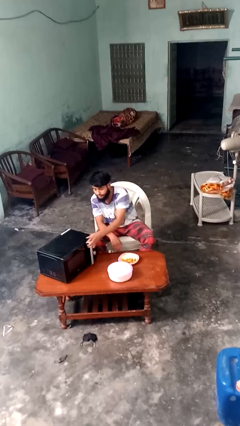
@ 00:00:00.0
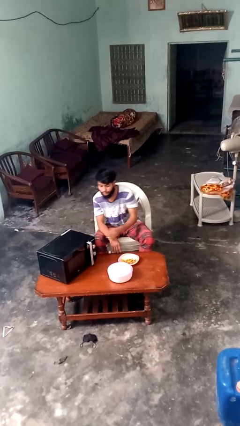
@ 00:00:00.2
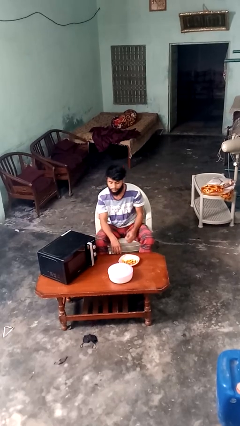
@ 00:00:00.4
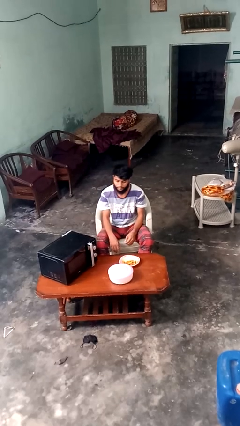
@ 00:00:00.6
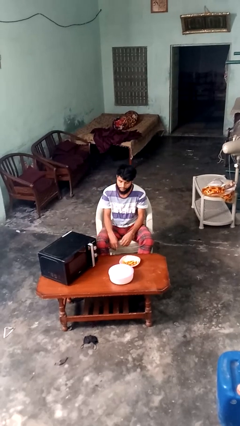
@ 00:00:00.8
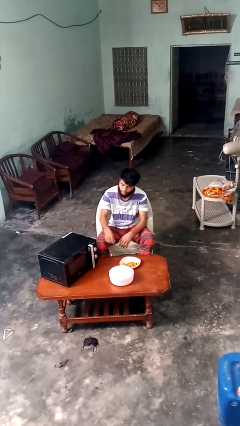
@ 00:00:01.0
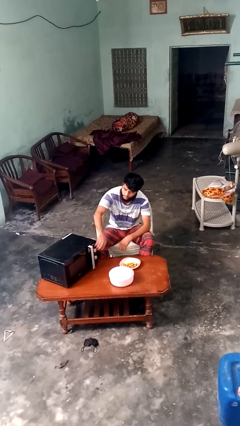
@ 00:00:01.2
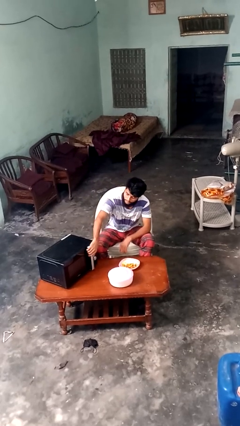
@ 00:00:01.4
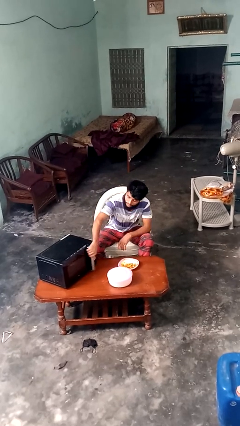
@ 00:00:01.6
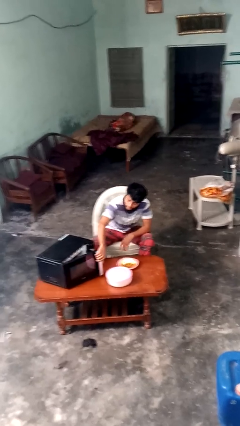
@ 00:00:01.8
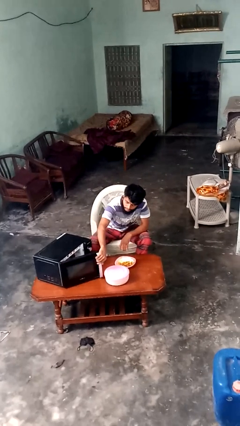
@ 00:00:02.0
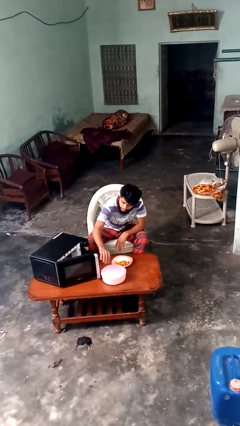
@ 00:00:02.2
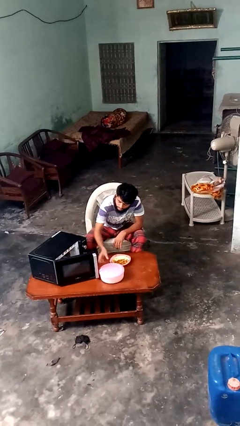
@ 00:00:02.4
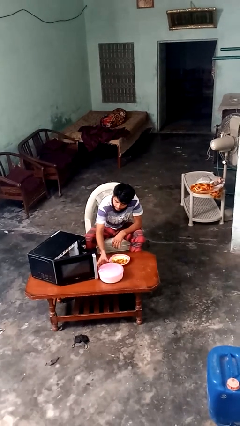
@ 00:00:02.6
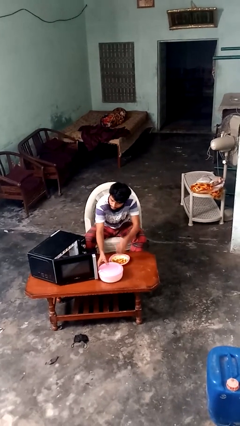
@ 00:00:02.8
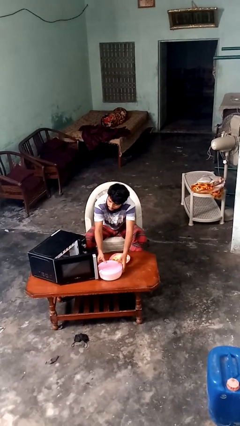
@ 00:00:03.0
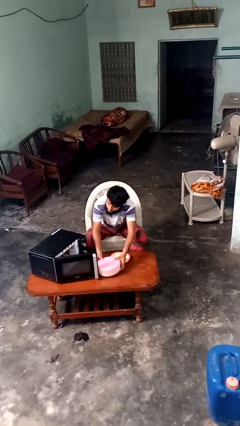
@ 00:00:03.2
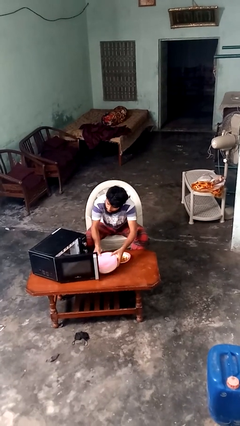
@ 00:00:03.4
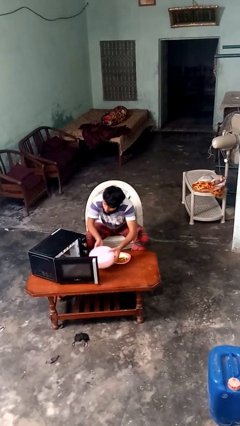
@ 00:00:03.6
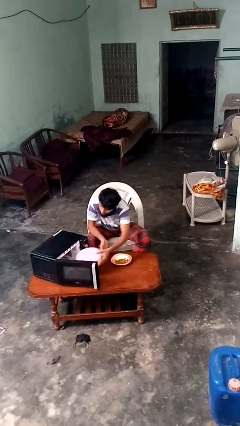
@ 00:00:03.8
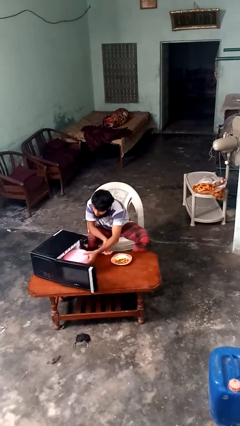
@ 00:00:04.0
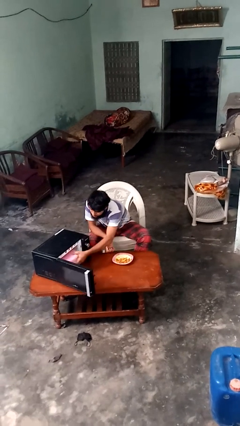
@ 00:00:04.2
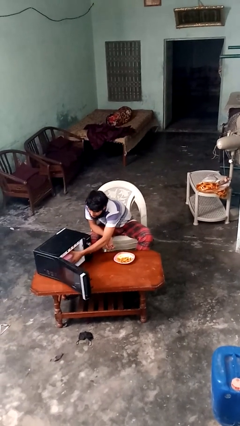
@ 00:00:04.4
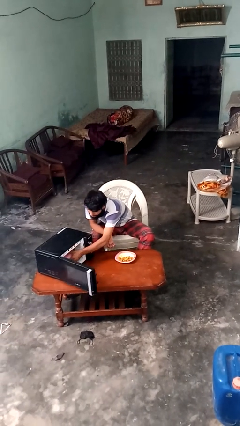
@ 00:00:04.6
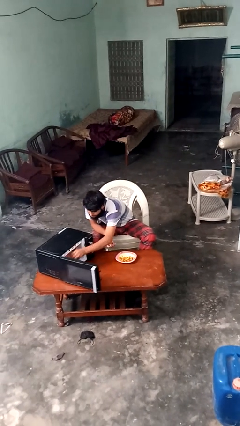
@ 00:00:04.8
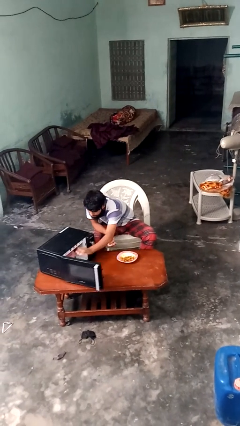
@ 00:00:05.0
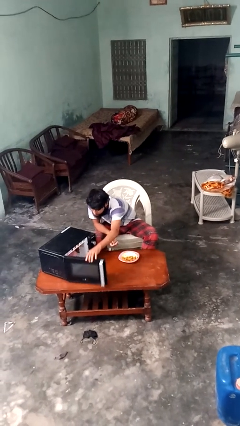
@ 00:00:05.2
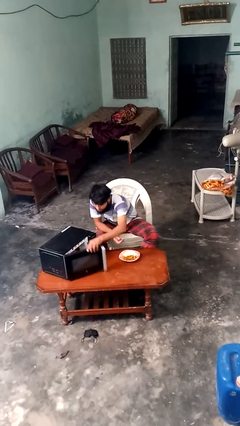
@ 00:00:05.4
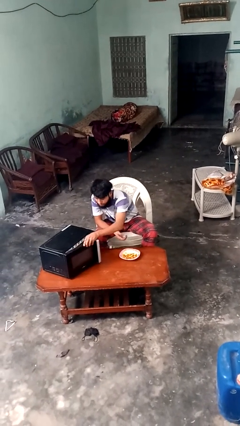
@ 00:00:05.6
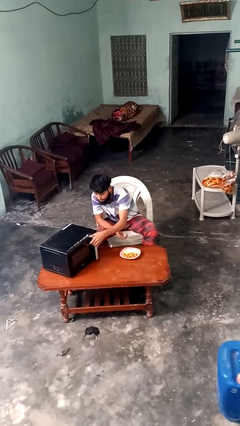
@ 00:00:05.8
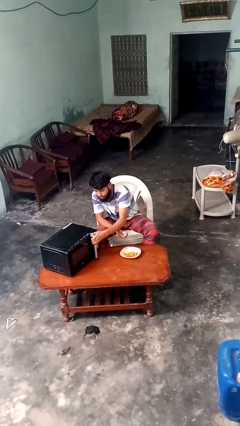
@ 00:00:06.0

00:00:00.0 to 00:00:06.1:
person puts object into microwave

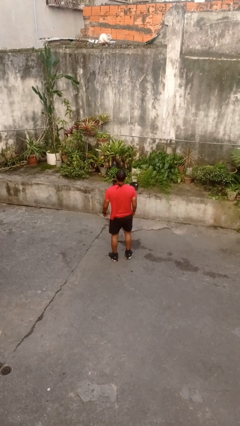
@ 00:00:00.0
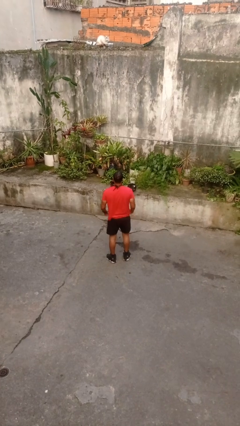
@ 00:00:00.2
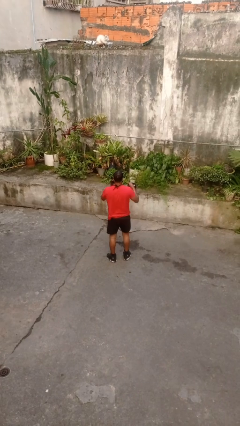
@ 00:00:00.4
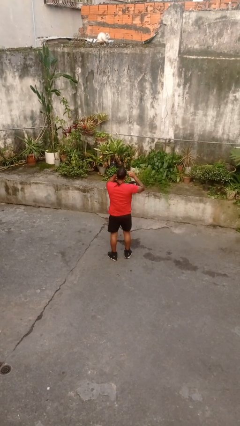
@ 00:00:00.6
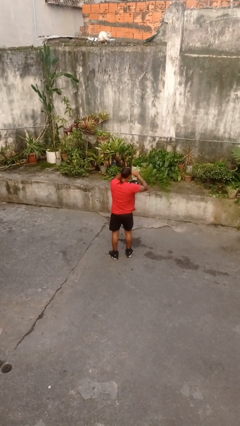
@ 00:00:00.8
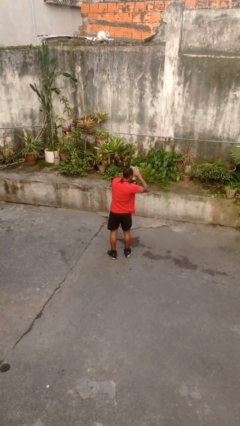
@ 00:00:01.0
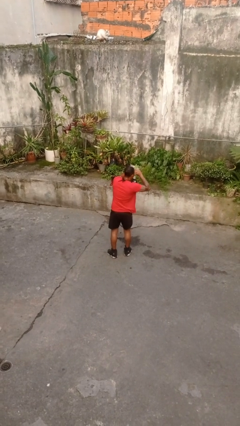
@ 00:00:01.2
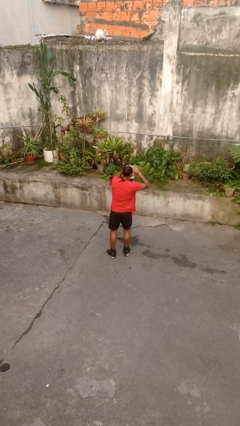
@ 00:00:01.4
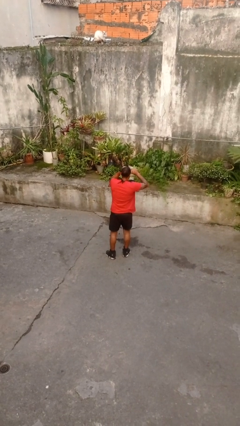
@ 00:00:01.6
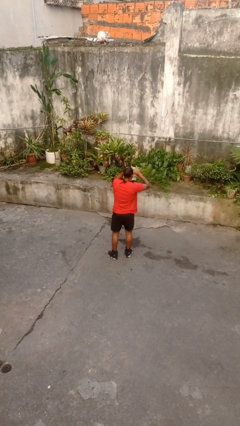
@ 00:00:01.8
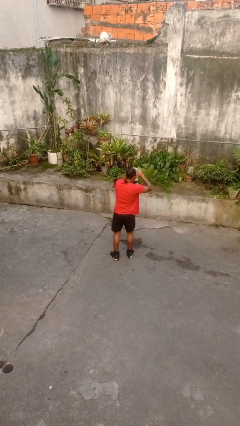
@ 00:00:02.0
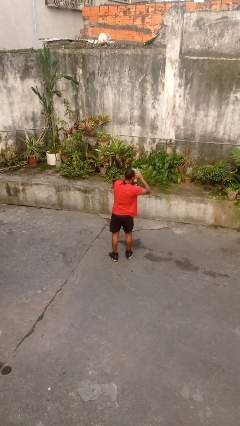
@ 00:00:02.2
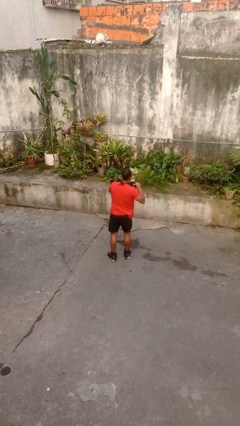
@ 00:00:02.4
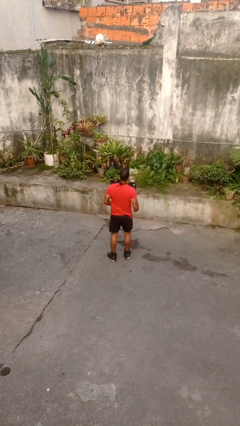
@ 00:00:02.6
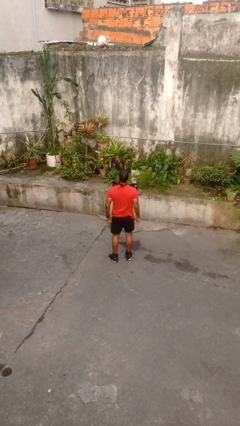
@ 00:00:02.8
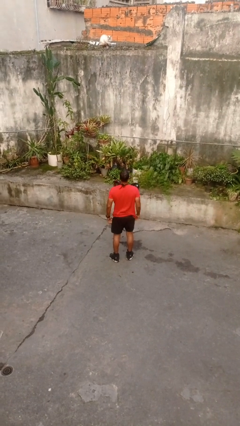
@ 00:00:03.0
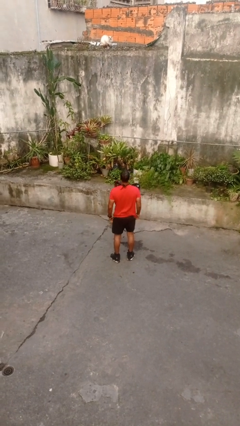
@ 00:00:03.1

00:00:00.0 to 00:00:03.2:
person shades eyes

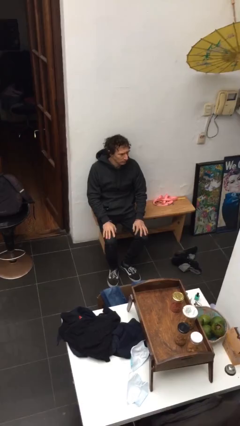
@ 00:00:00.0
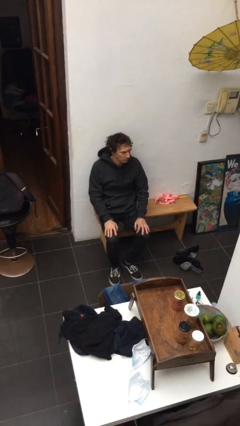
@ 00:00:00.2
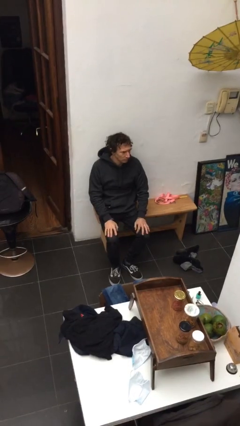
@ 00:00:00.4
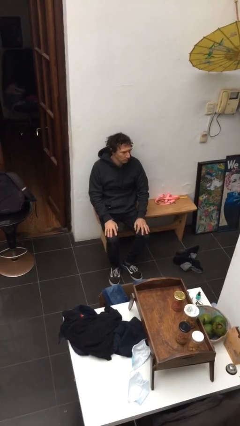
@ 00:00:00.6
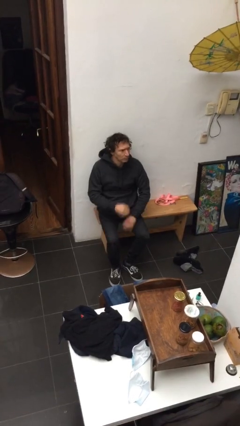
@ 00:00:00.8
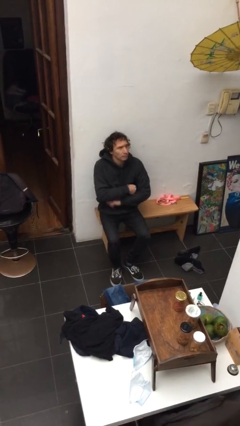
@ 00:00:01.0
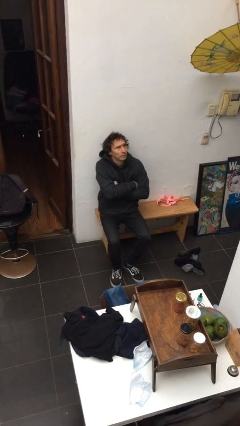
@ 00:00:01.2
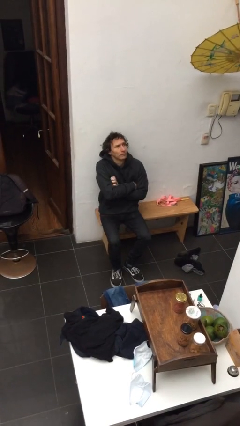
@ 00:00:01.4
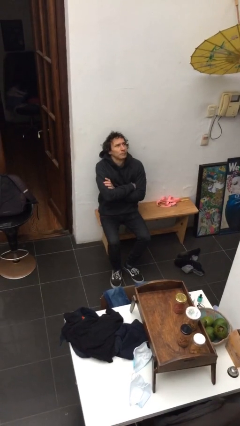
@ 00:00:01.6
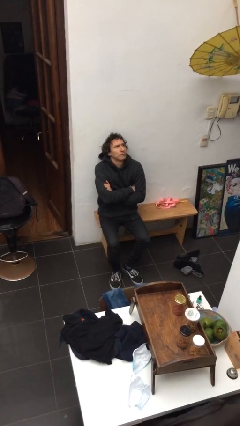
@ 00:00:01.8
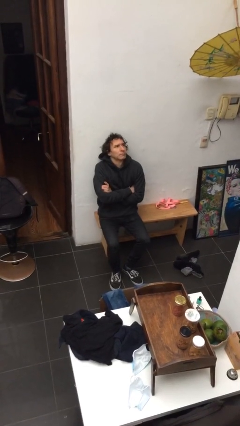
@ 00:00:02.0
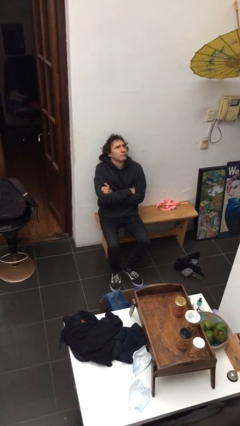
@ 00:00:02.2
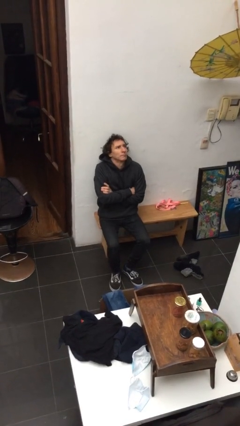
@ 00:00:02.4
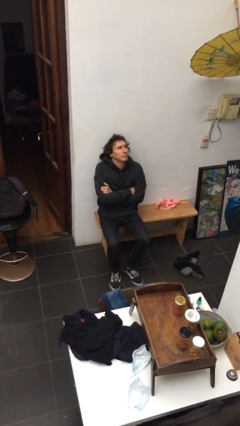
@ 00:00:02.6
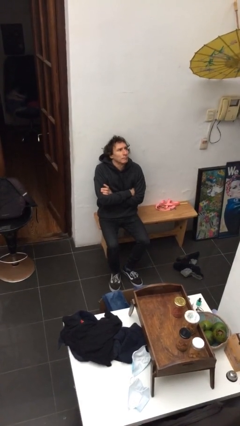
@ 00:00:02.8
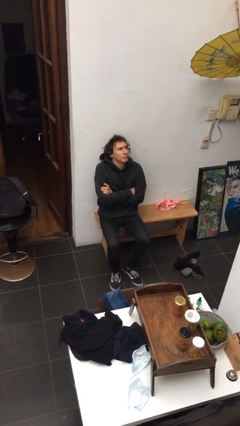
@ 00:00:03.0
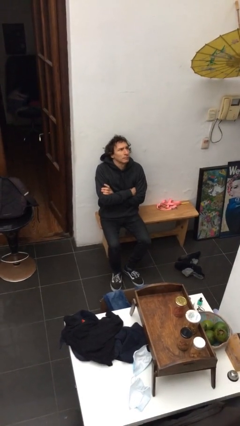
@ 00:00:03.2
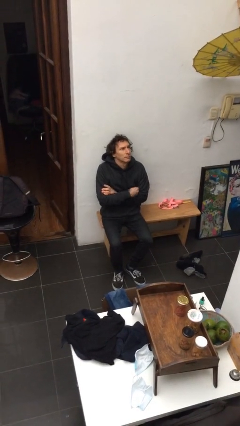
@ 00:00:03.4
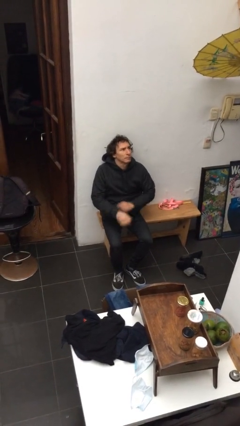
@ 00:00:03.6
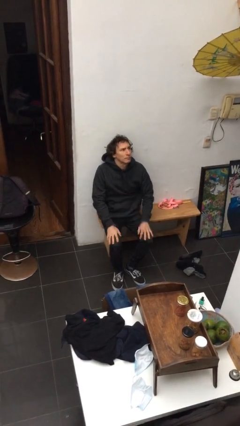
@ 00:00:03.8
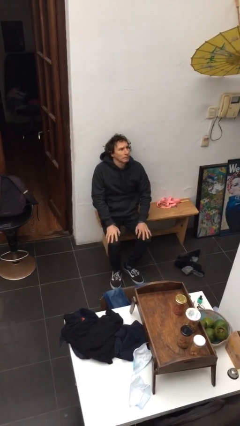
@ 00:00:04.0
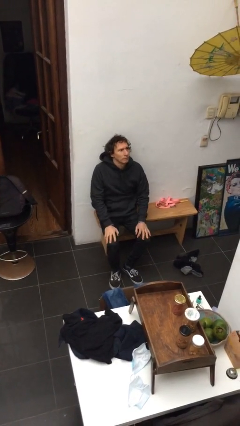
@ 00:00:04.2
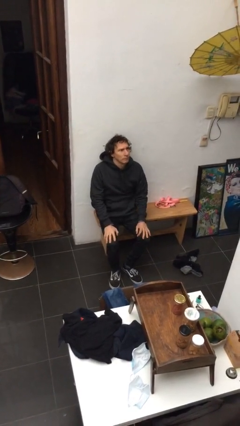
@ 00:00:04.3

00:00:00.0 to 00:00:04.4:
person crosses arms

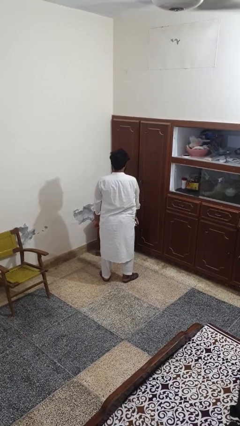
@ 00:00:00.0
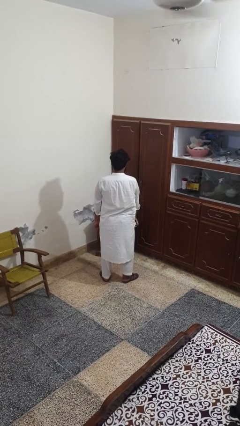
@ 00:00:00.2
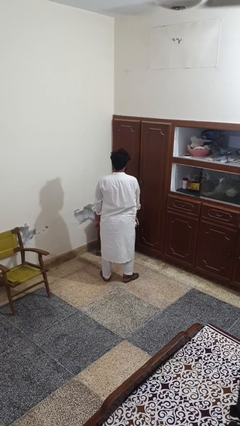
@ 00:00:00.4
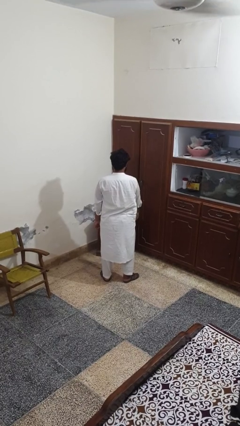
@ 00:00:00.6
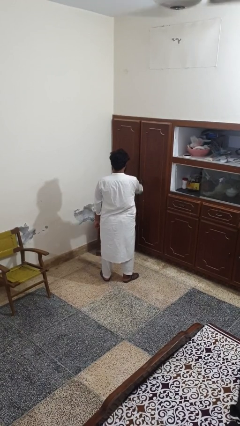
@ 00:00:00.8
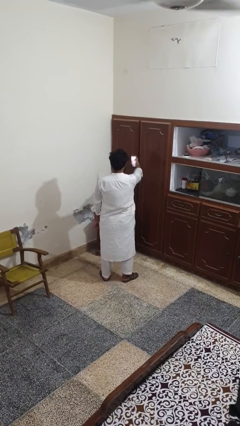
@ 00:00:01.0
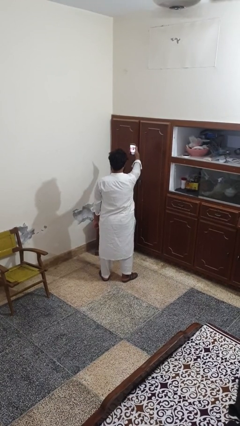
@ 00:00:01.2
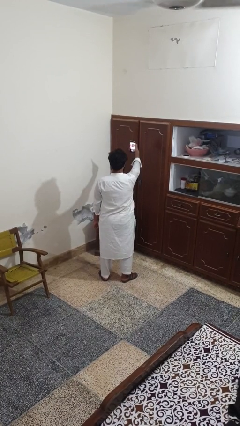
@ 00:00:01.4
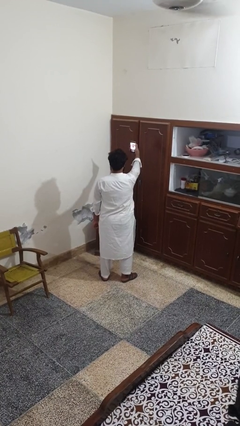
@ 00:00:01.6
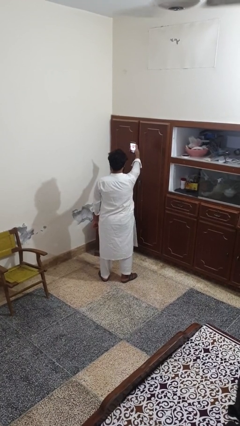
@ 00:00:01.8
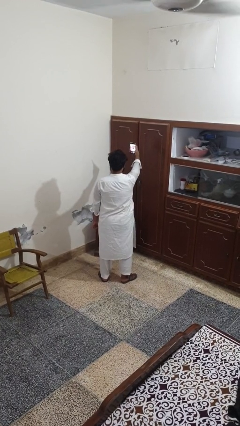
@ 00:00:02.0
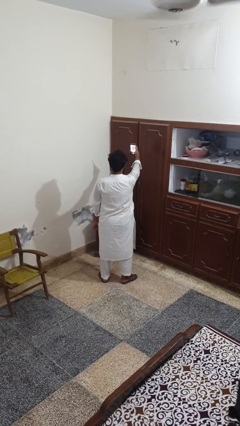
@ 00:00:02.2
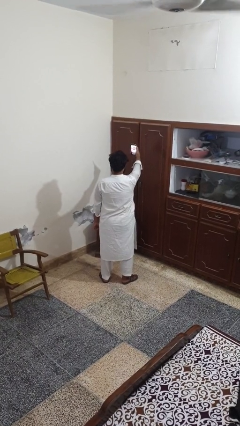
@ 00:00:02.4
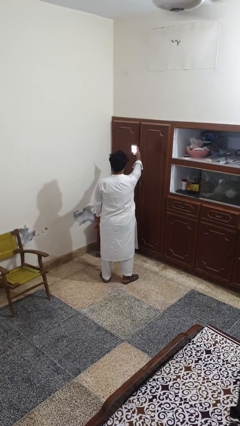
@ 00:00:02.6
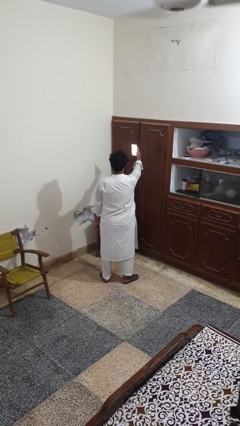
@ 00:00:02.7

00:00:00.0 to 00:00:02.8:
person takes selfie

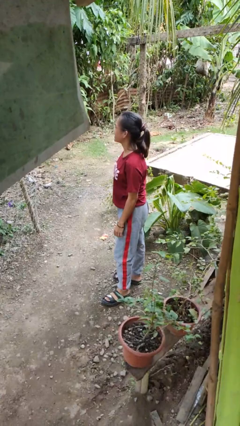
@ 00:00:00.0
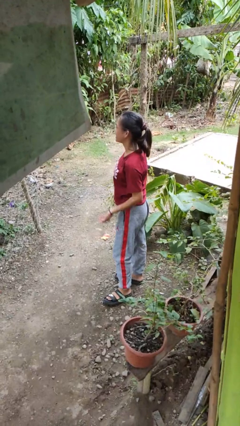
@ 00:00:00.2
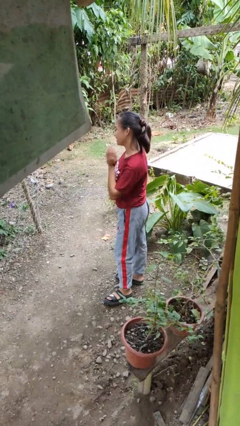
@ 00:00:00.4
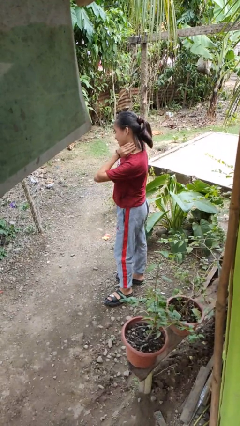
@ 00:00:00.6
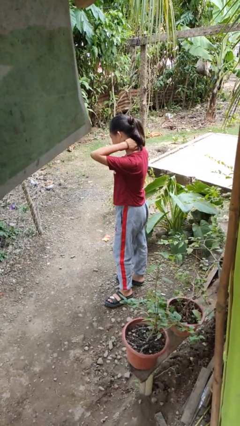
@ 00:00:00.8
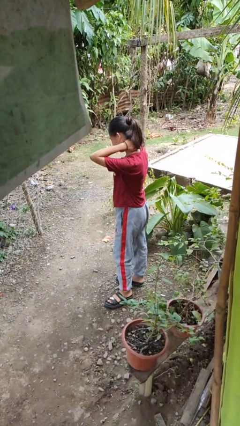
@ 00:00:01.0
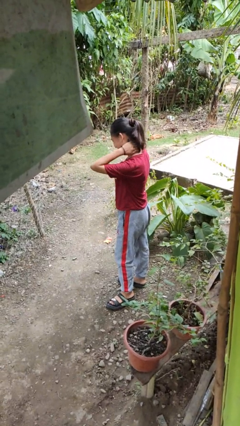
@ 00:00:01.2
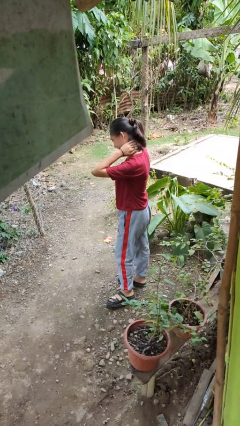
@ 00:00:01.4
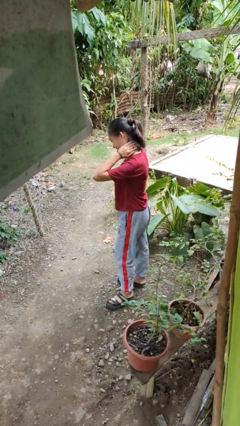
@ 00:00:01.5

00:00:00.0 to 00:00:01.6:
person rubs neck
